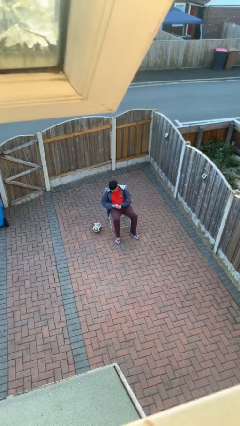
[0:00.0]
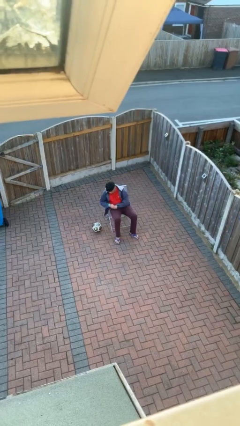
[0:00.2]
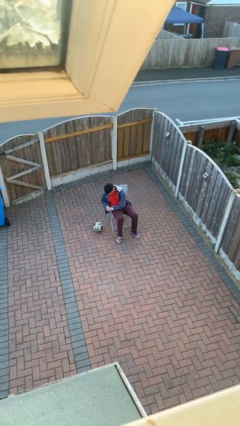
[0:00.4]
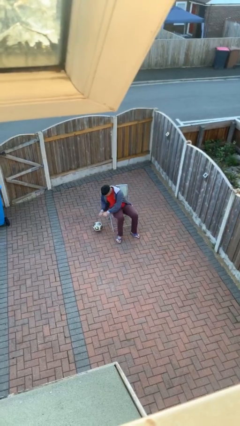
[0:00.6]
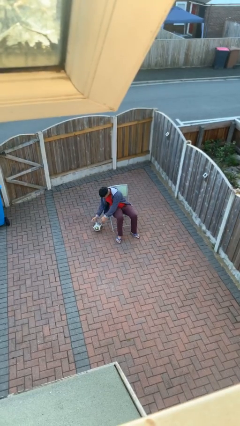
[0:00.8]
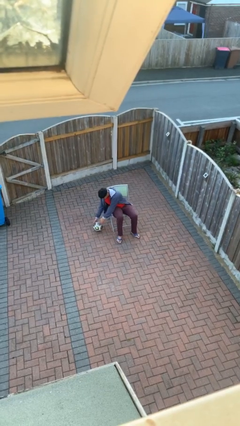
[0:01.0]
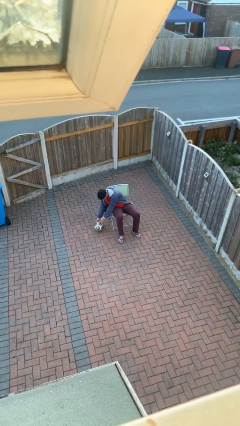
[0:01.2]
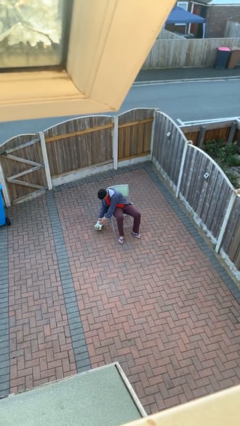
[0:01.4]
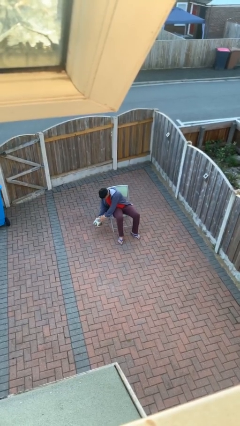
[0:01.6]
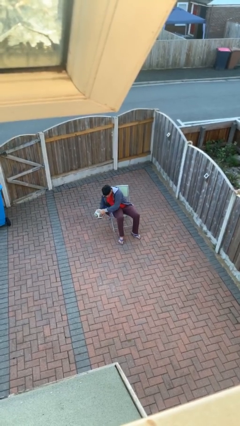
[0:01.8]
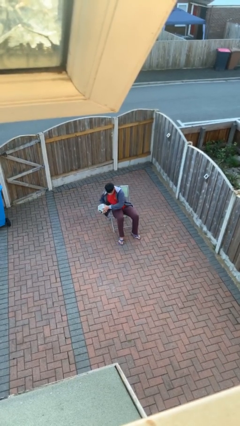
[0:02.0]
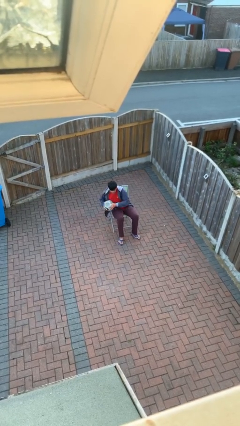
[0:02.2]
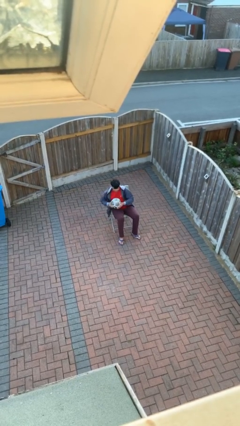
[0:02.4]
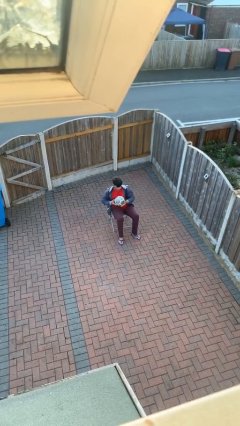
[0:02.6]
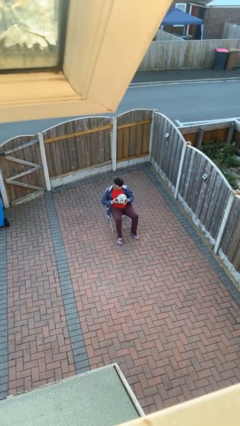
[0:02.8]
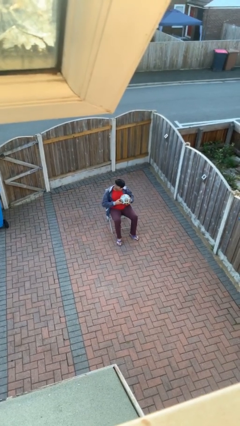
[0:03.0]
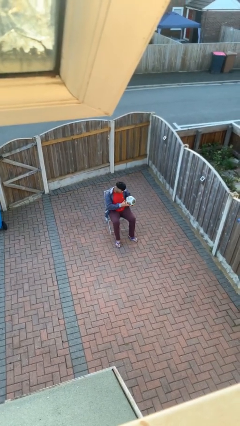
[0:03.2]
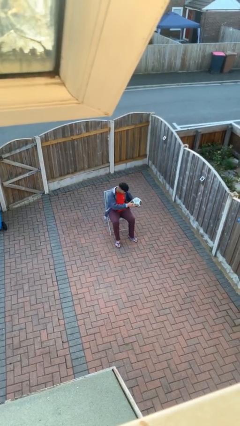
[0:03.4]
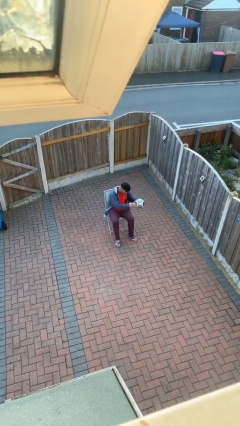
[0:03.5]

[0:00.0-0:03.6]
person picks up object from floor

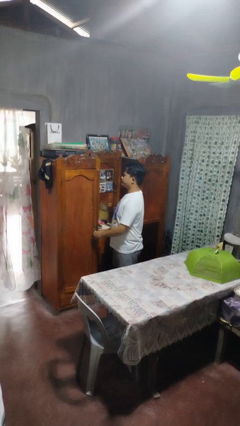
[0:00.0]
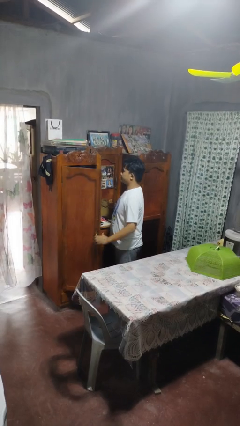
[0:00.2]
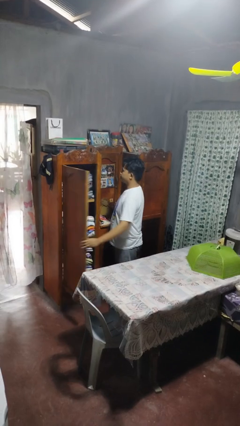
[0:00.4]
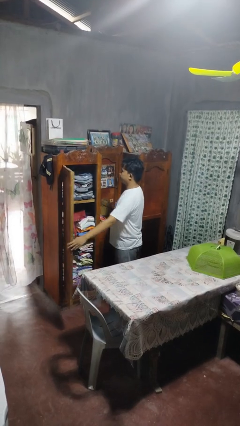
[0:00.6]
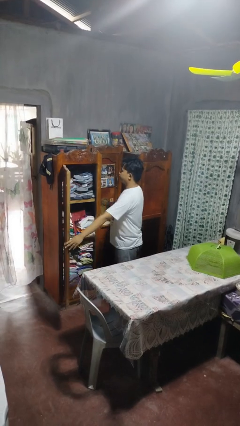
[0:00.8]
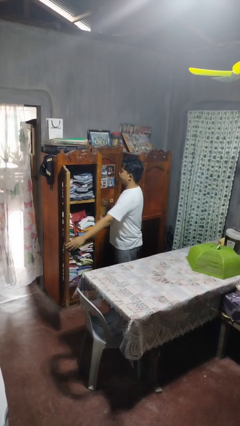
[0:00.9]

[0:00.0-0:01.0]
person opens closet door

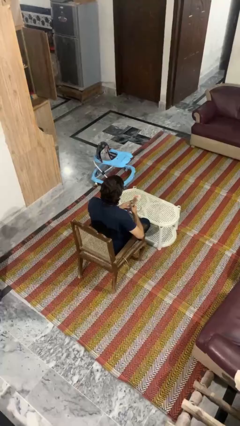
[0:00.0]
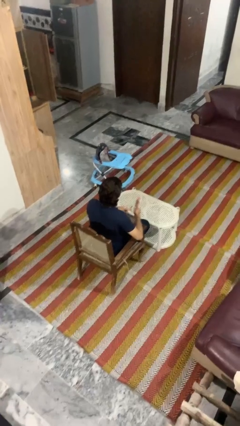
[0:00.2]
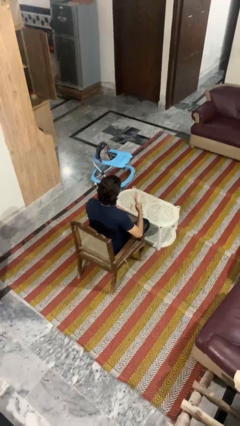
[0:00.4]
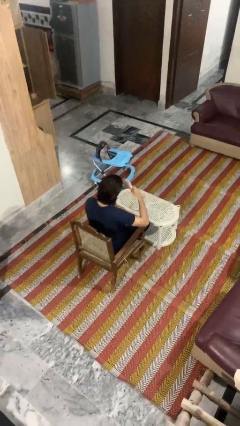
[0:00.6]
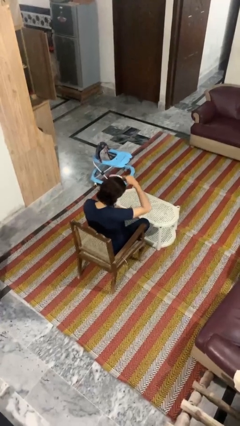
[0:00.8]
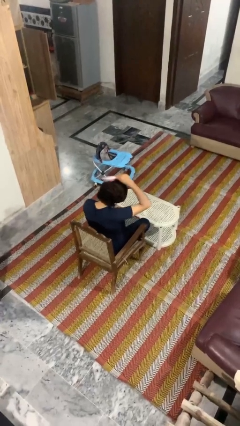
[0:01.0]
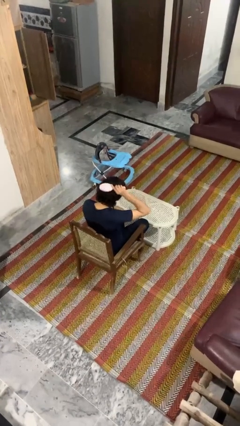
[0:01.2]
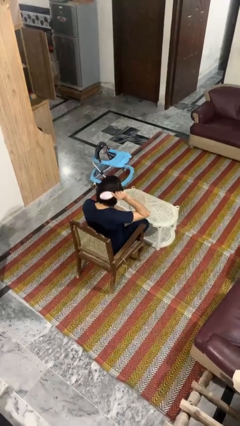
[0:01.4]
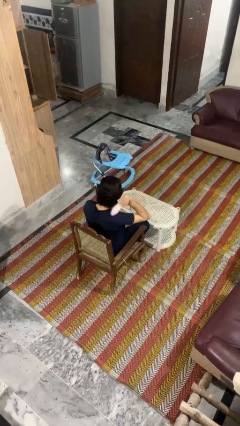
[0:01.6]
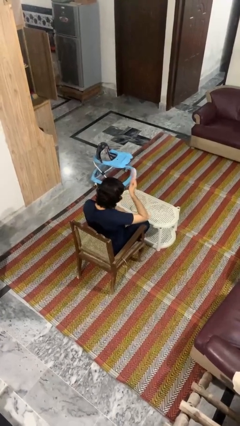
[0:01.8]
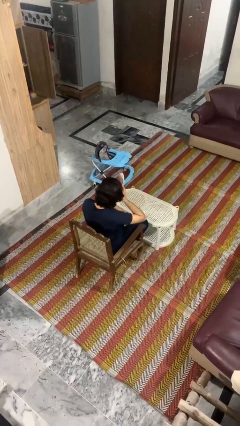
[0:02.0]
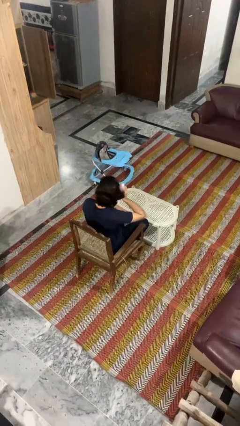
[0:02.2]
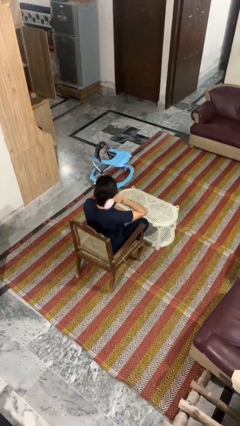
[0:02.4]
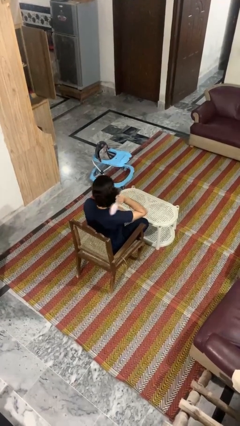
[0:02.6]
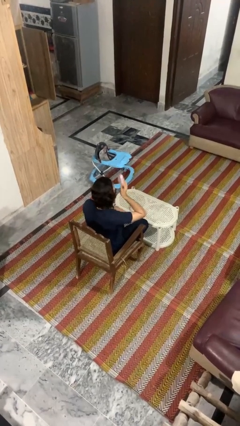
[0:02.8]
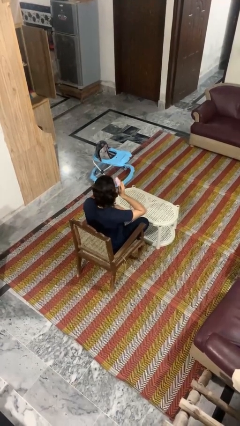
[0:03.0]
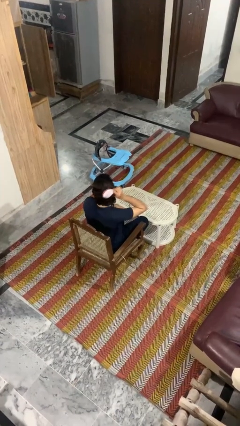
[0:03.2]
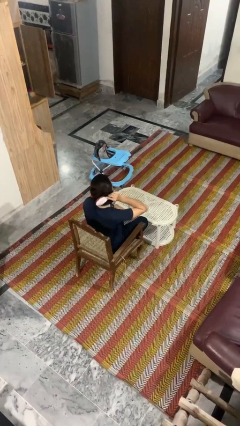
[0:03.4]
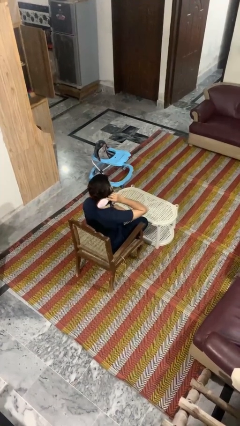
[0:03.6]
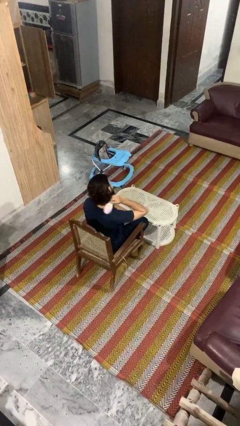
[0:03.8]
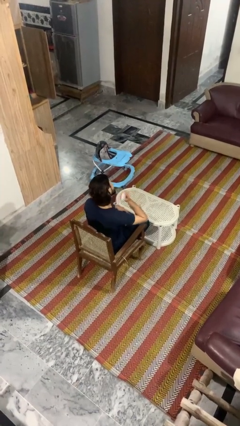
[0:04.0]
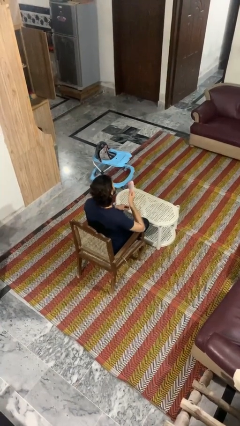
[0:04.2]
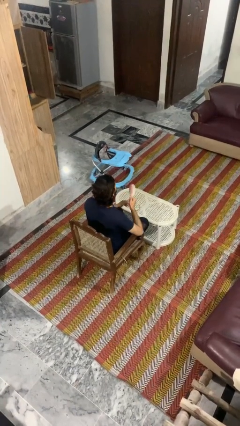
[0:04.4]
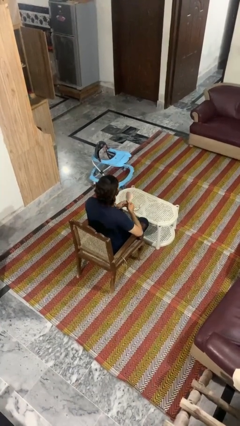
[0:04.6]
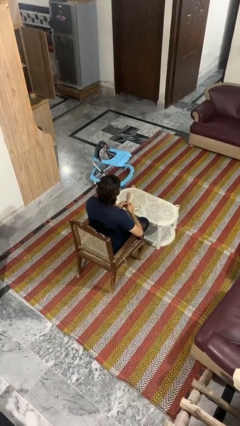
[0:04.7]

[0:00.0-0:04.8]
person brushes hair

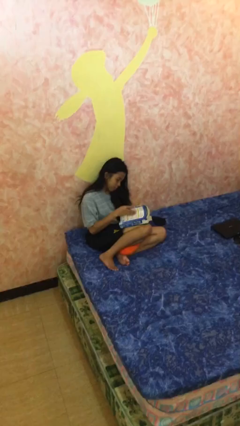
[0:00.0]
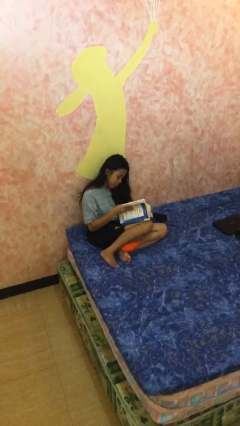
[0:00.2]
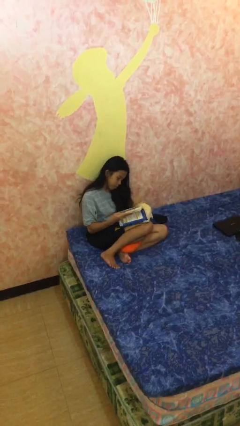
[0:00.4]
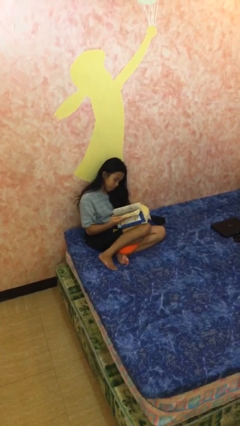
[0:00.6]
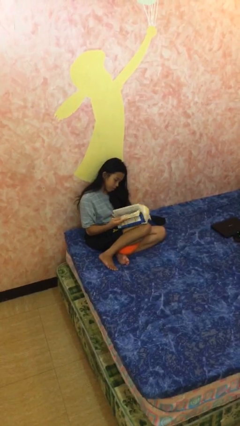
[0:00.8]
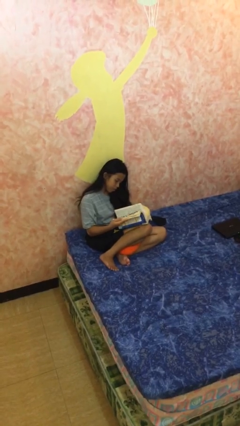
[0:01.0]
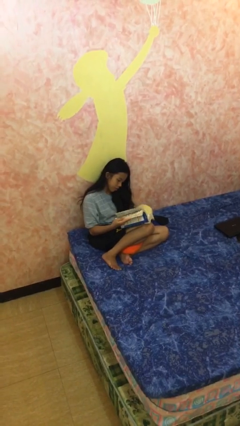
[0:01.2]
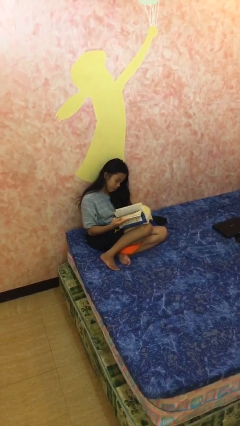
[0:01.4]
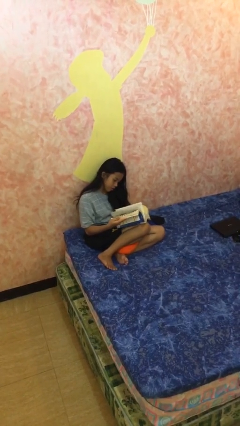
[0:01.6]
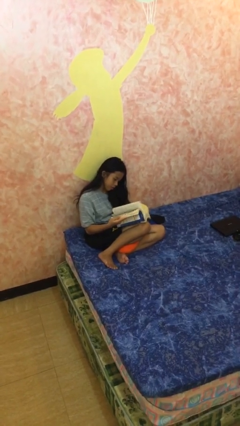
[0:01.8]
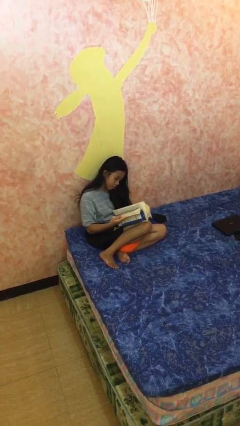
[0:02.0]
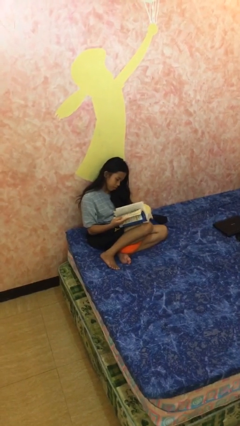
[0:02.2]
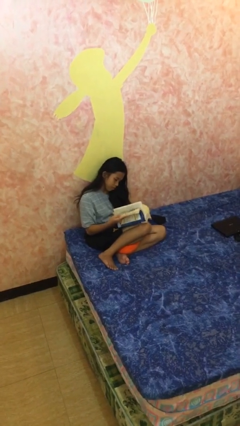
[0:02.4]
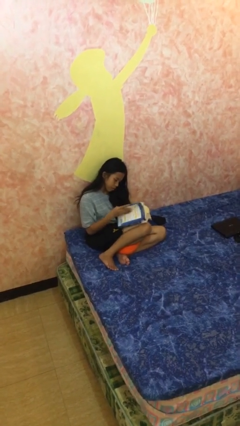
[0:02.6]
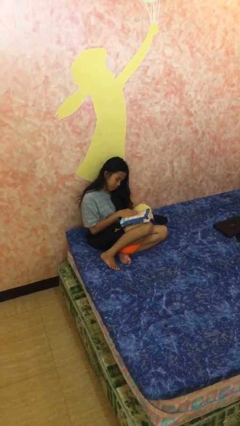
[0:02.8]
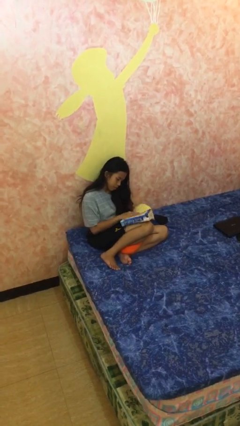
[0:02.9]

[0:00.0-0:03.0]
person reads document

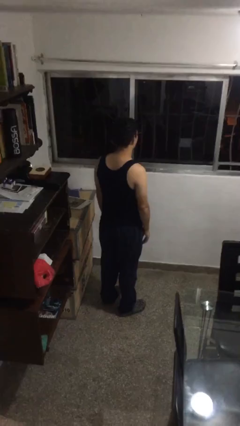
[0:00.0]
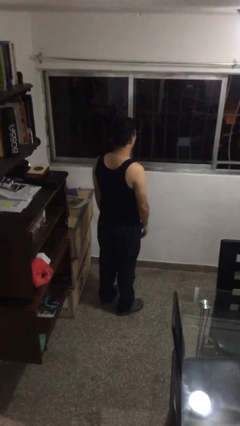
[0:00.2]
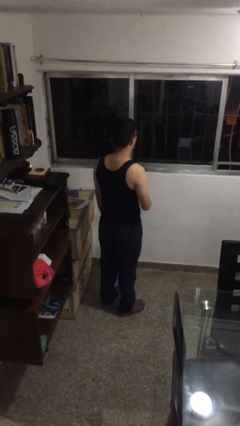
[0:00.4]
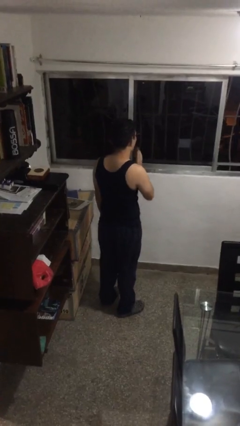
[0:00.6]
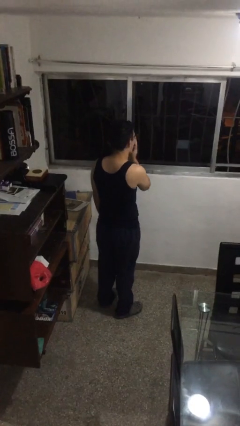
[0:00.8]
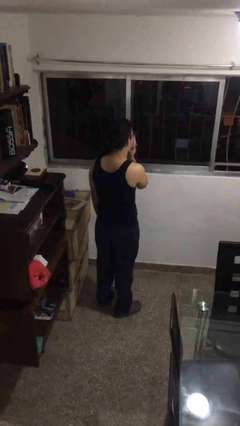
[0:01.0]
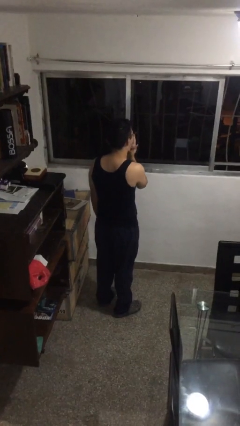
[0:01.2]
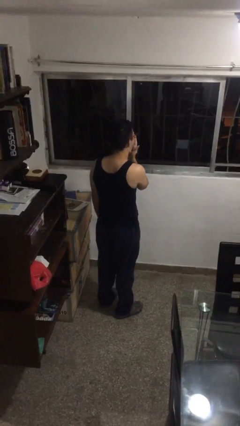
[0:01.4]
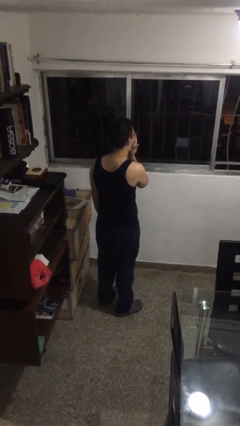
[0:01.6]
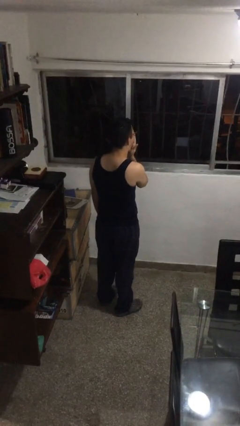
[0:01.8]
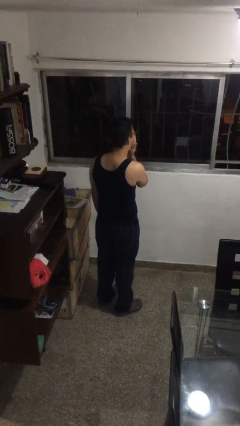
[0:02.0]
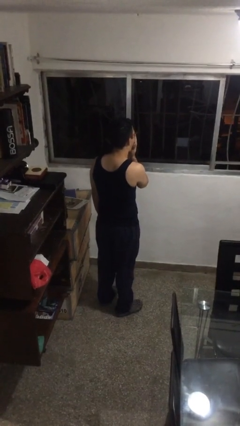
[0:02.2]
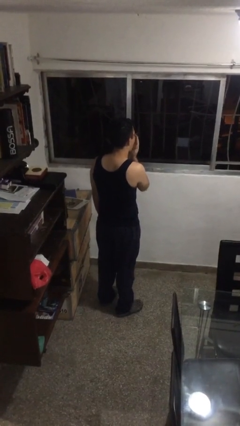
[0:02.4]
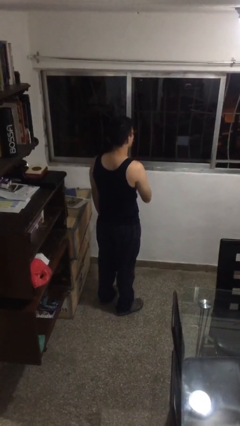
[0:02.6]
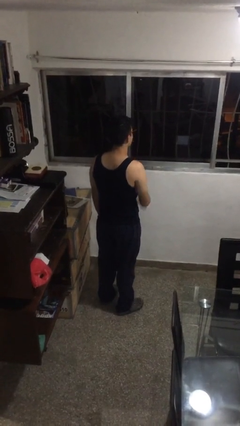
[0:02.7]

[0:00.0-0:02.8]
person yawns

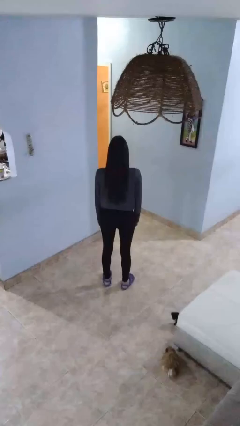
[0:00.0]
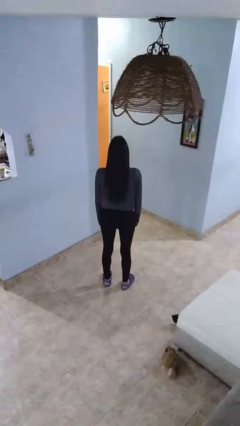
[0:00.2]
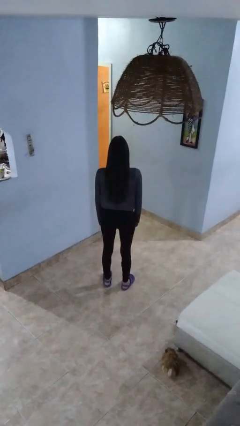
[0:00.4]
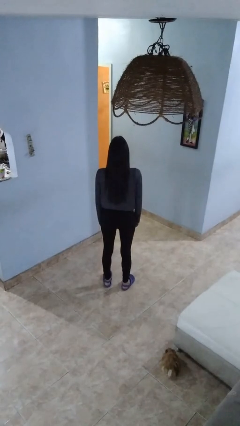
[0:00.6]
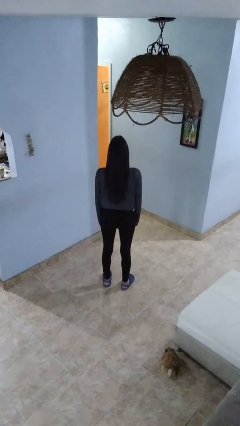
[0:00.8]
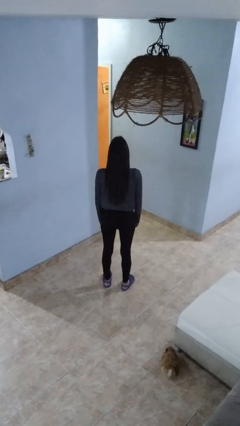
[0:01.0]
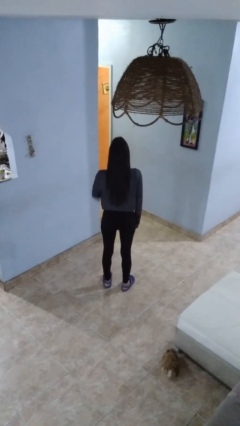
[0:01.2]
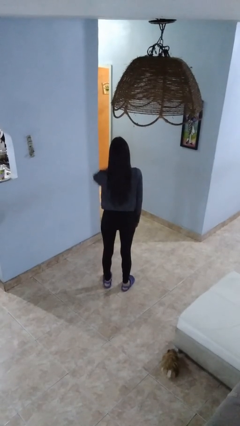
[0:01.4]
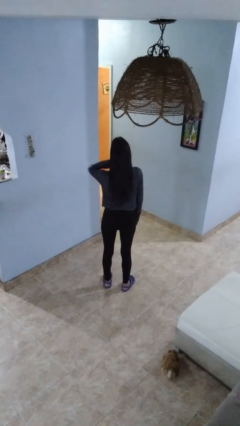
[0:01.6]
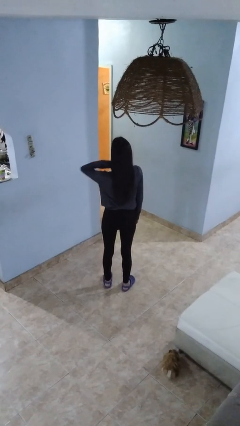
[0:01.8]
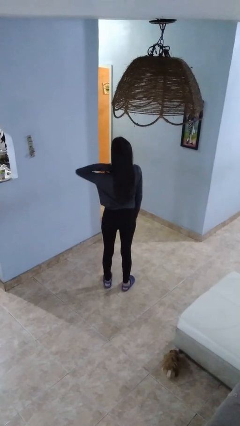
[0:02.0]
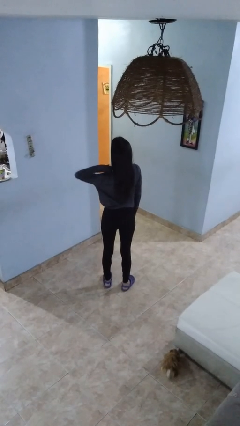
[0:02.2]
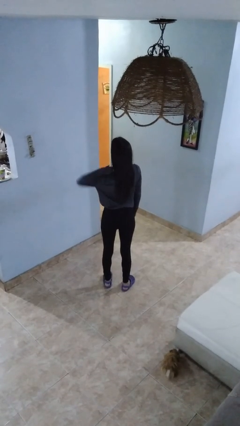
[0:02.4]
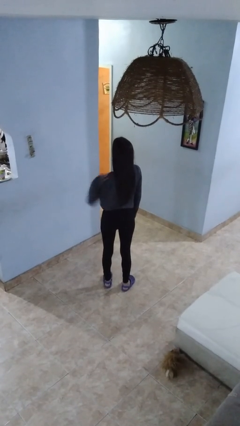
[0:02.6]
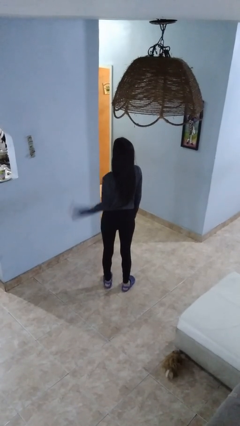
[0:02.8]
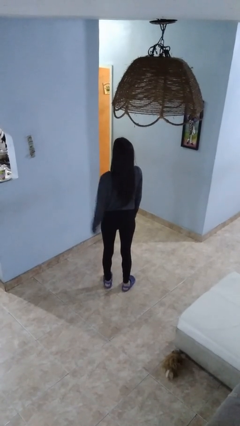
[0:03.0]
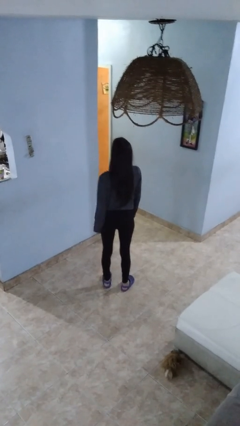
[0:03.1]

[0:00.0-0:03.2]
person gestures cut
